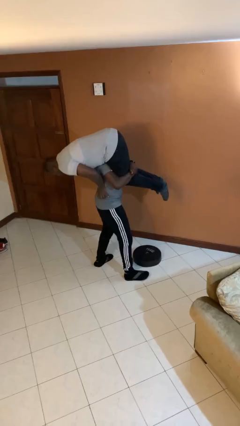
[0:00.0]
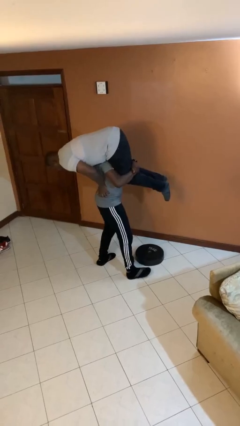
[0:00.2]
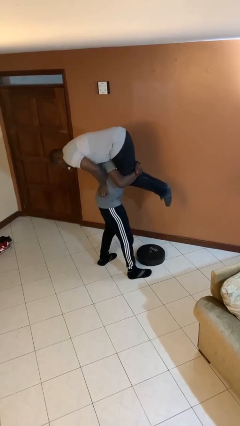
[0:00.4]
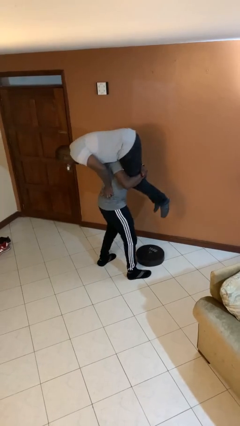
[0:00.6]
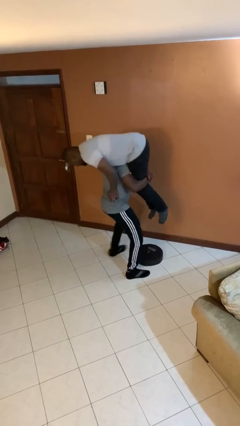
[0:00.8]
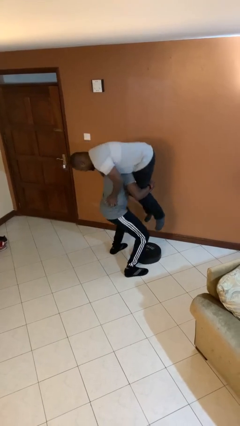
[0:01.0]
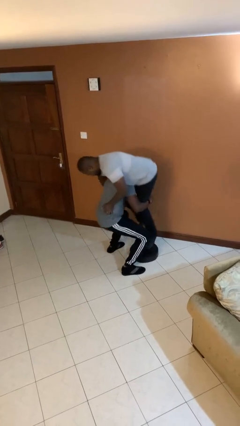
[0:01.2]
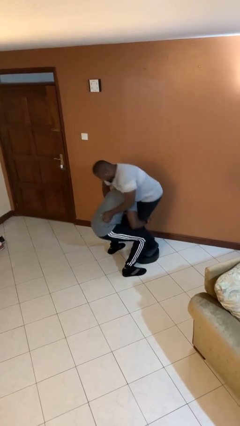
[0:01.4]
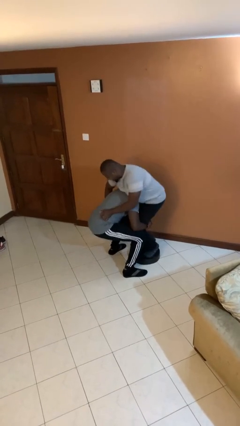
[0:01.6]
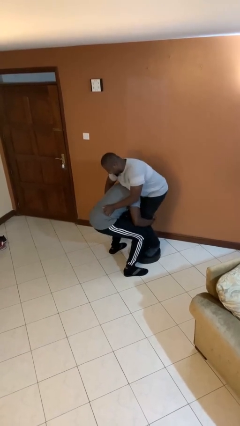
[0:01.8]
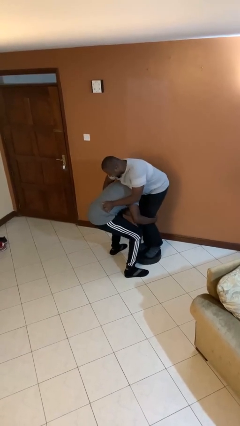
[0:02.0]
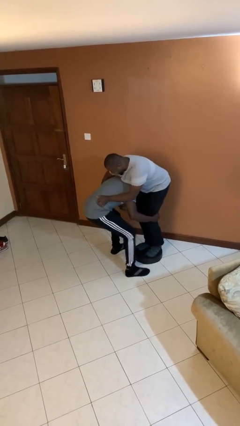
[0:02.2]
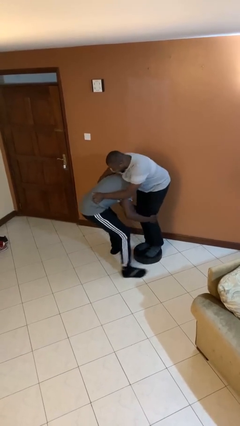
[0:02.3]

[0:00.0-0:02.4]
person puts down person

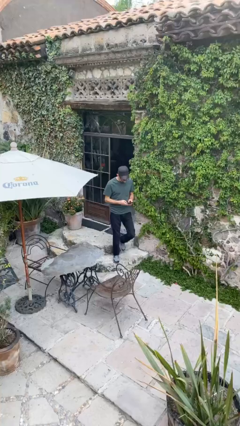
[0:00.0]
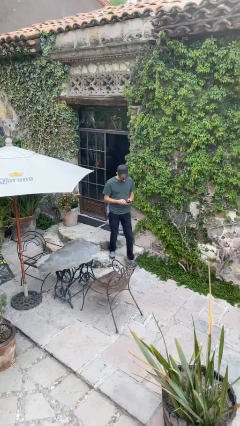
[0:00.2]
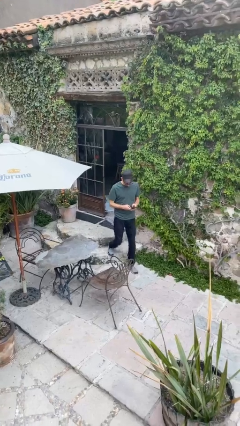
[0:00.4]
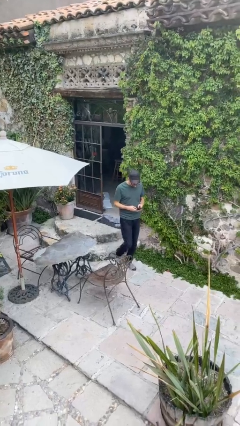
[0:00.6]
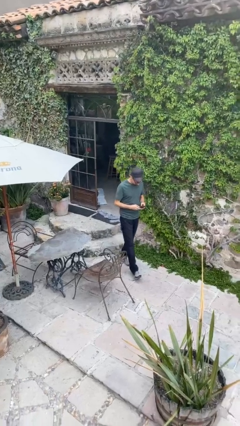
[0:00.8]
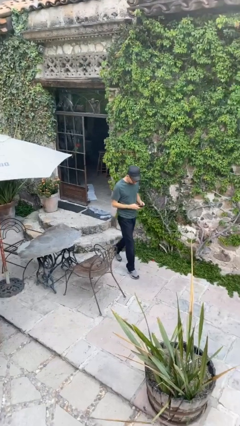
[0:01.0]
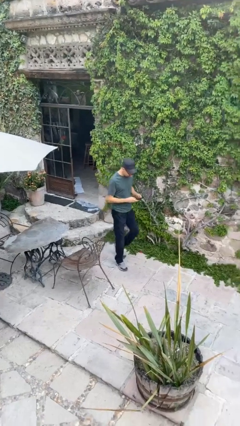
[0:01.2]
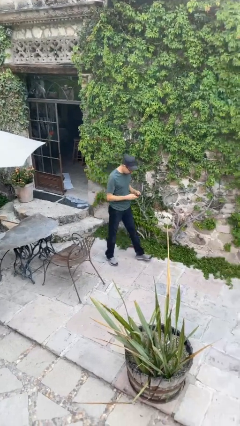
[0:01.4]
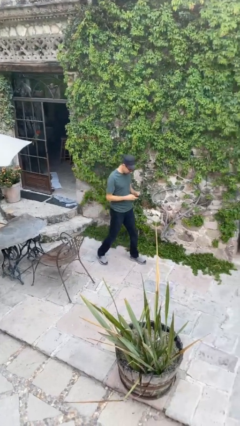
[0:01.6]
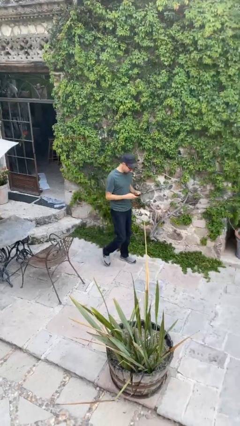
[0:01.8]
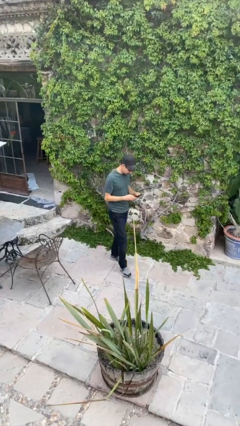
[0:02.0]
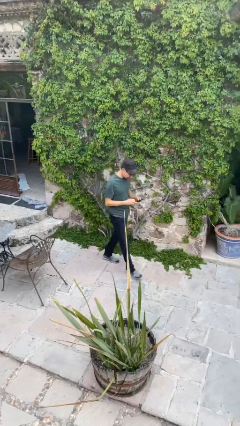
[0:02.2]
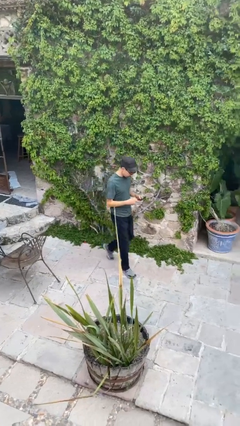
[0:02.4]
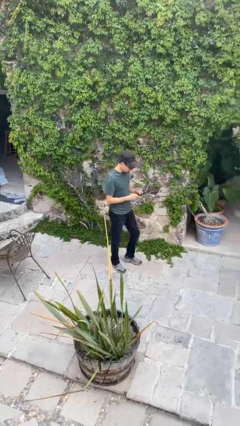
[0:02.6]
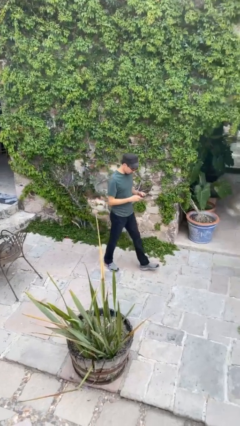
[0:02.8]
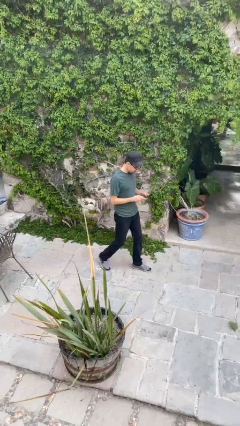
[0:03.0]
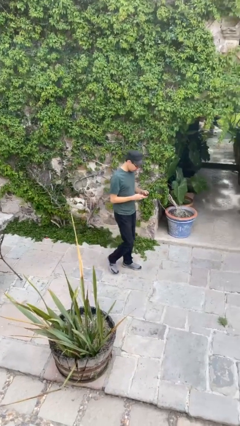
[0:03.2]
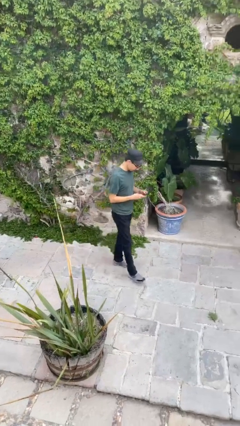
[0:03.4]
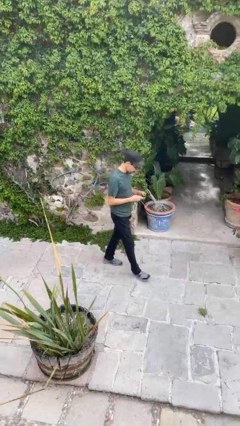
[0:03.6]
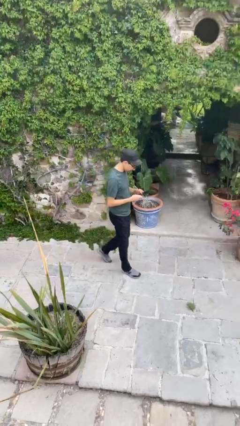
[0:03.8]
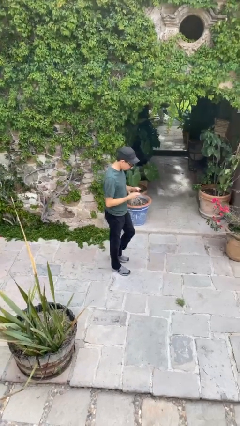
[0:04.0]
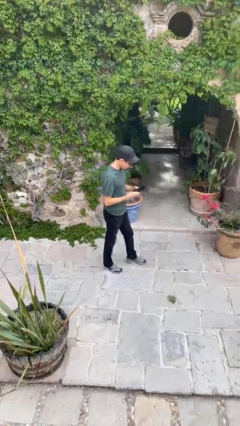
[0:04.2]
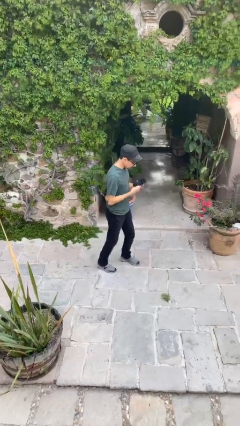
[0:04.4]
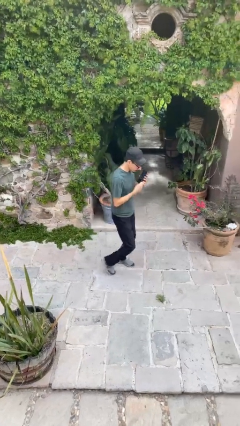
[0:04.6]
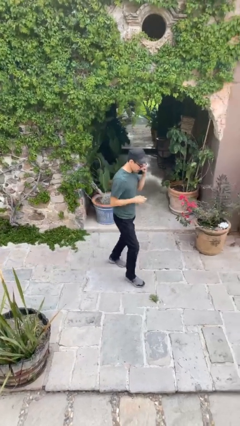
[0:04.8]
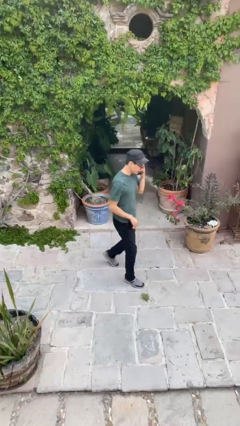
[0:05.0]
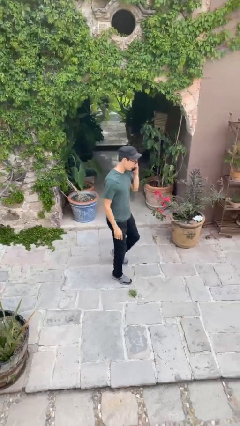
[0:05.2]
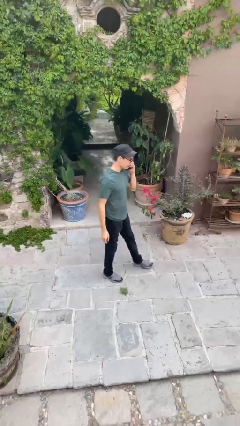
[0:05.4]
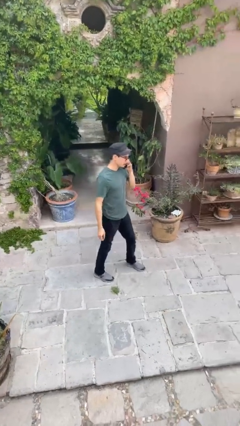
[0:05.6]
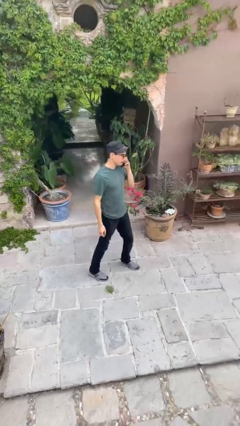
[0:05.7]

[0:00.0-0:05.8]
person texts on phone

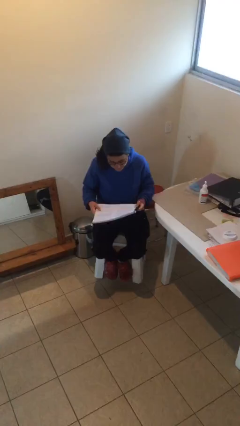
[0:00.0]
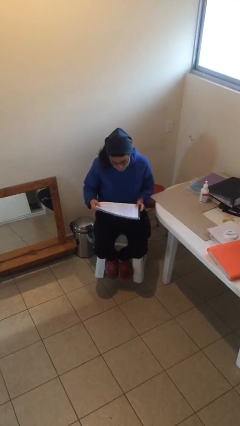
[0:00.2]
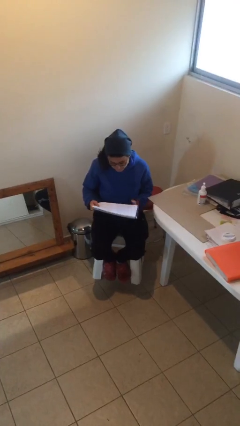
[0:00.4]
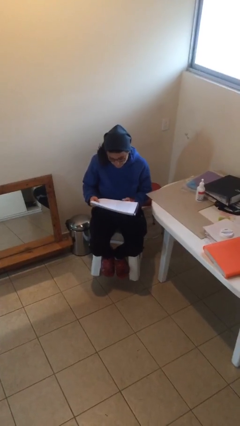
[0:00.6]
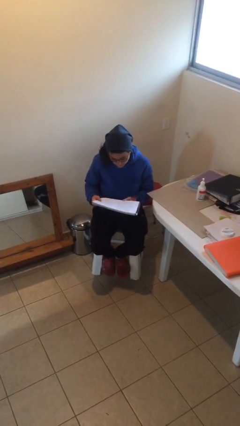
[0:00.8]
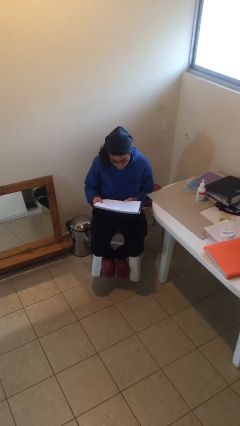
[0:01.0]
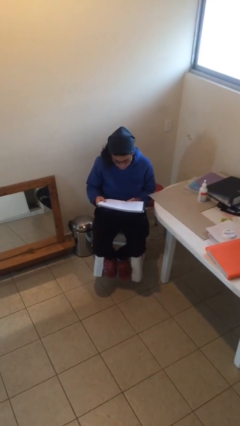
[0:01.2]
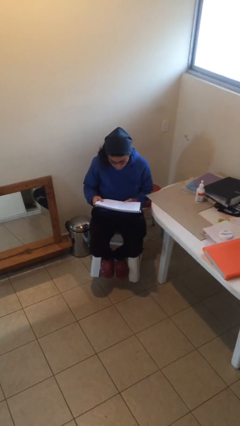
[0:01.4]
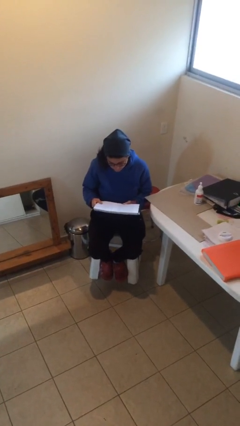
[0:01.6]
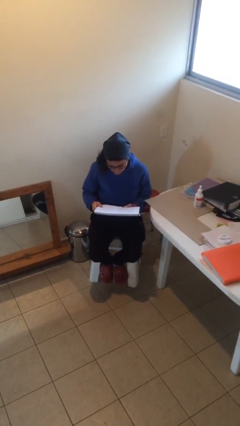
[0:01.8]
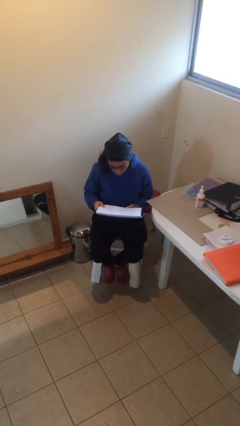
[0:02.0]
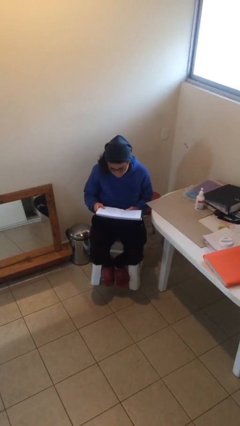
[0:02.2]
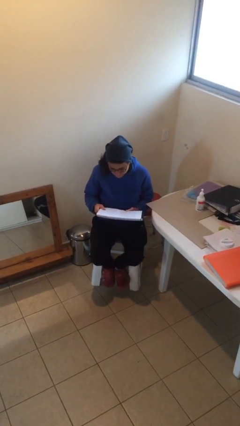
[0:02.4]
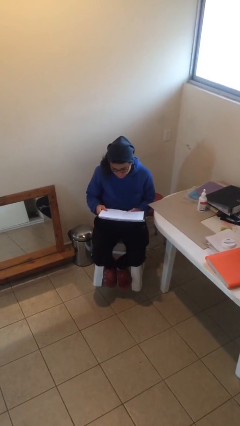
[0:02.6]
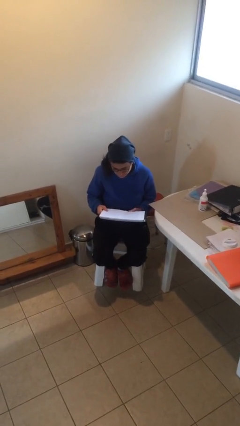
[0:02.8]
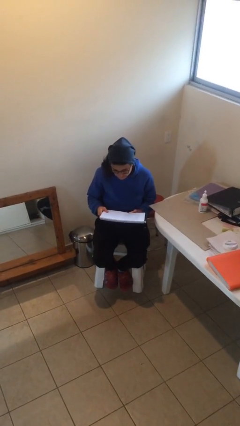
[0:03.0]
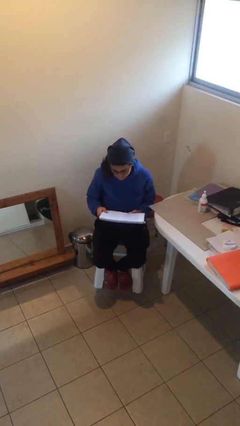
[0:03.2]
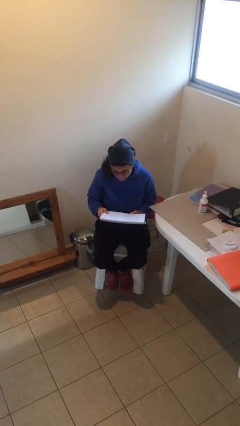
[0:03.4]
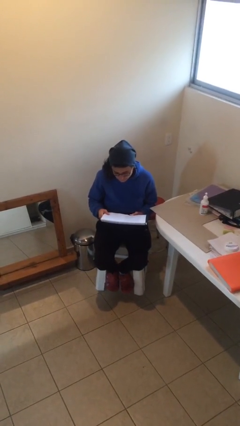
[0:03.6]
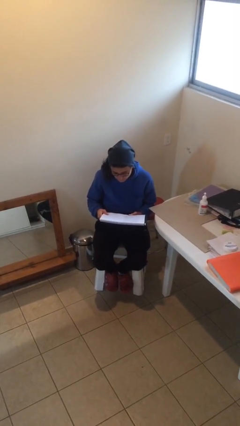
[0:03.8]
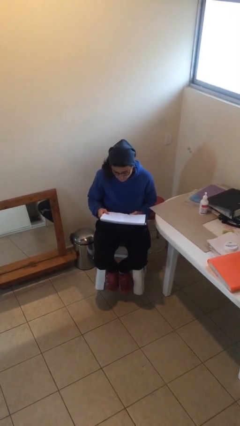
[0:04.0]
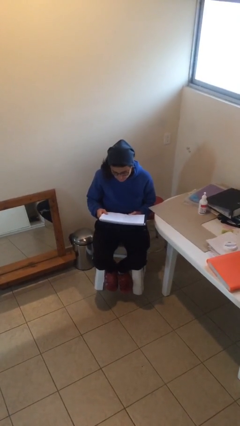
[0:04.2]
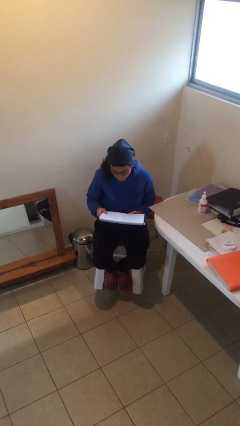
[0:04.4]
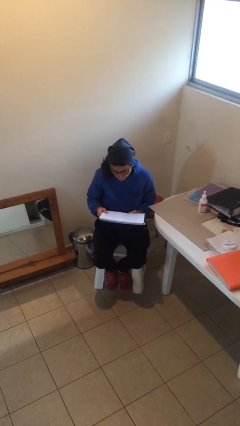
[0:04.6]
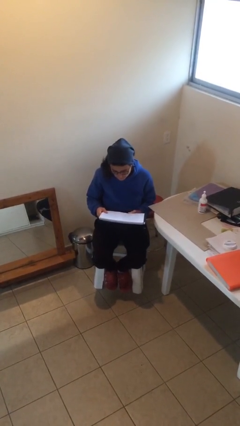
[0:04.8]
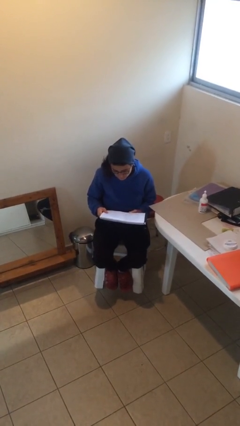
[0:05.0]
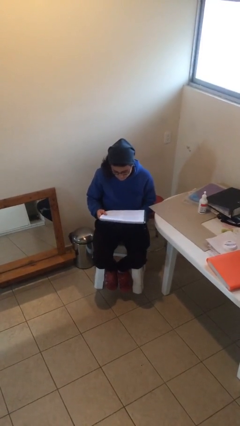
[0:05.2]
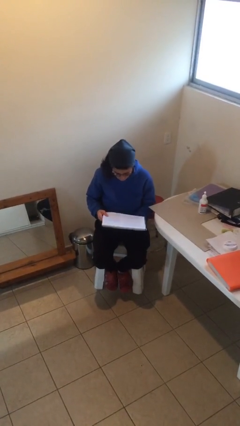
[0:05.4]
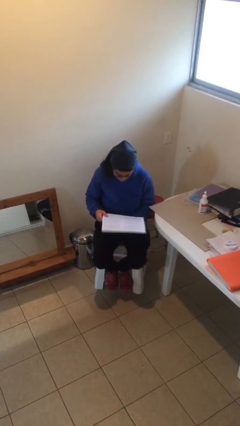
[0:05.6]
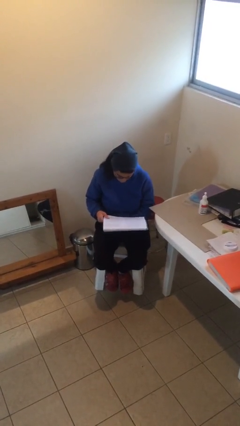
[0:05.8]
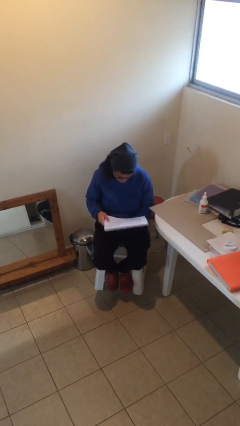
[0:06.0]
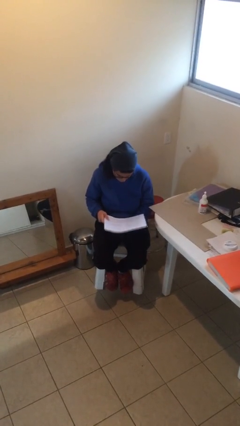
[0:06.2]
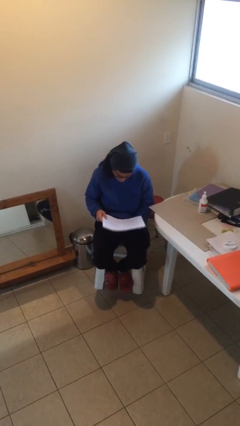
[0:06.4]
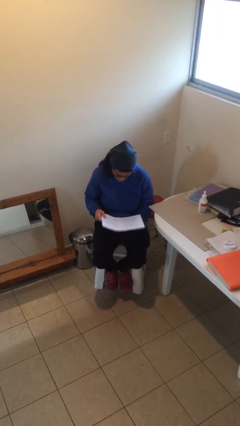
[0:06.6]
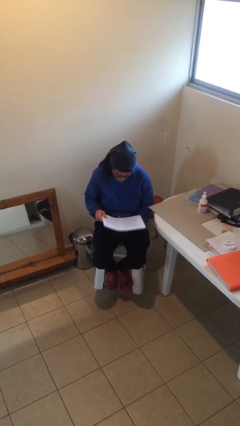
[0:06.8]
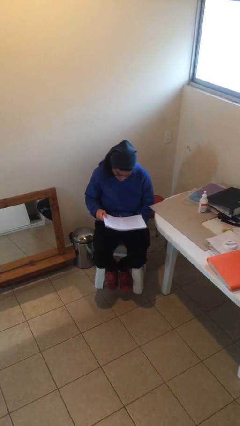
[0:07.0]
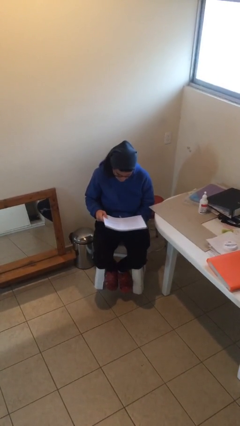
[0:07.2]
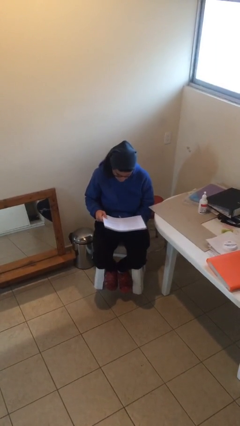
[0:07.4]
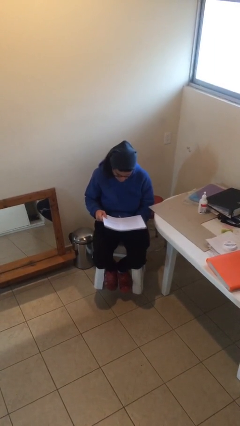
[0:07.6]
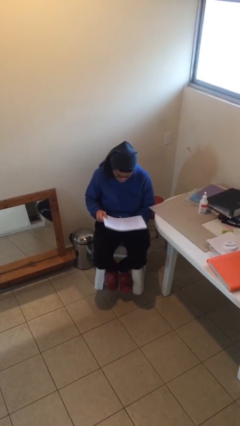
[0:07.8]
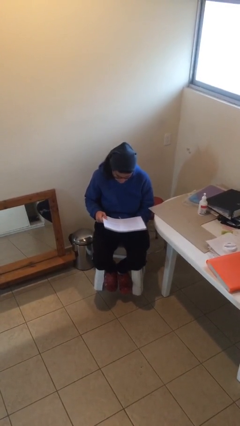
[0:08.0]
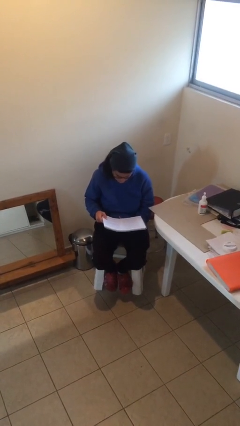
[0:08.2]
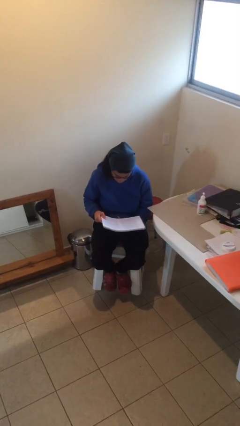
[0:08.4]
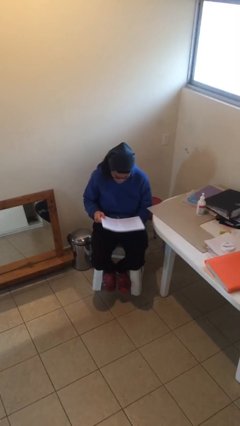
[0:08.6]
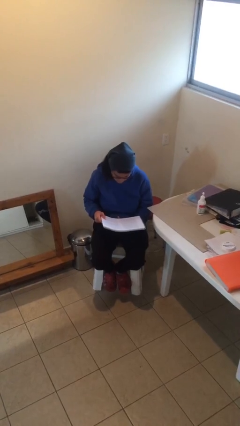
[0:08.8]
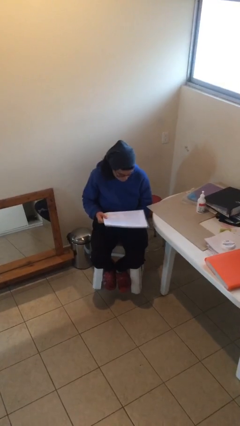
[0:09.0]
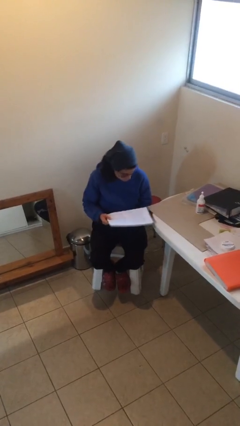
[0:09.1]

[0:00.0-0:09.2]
person reads document

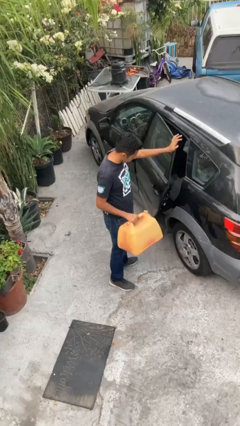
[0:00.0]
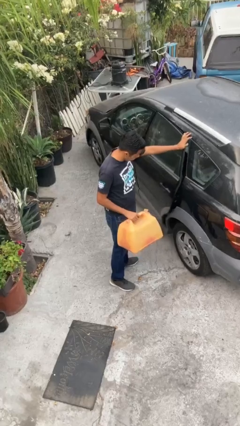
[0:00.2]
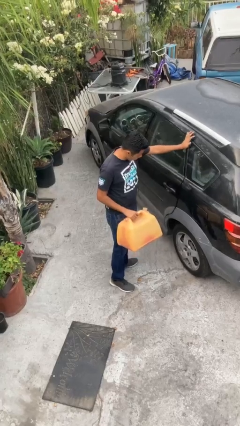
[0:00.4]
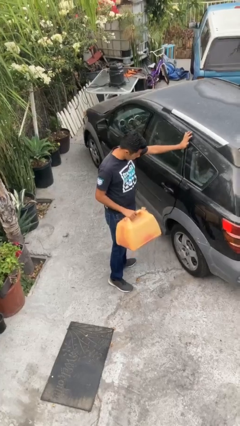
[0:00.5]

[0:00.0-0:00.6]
person closes car door
